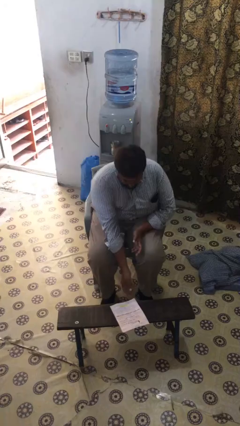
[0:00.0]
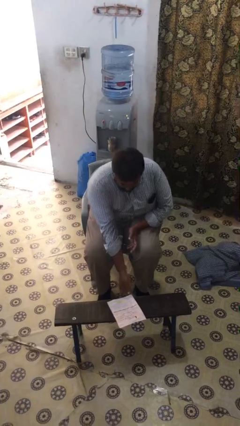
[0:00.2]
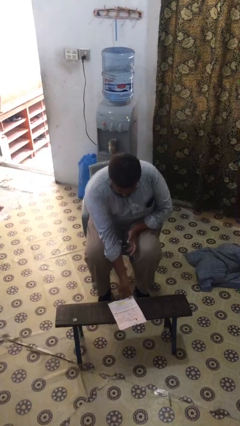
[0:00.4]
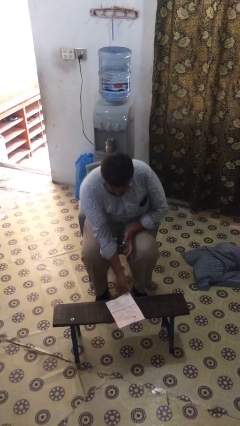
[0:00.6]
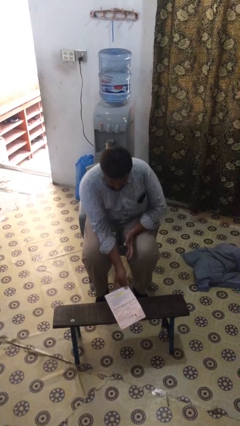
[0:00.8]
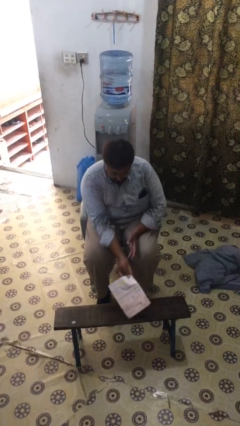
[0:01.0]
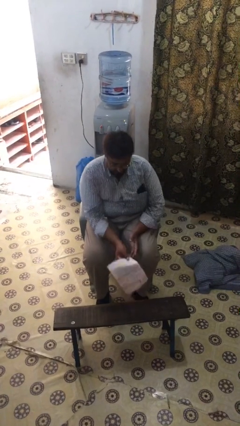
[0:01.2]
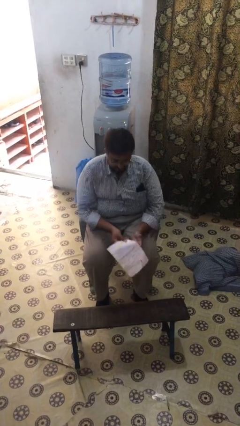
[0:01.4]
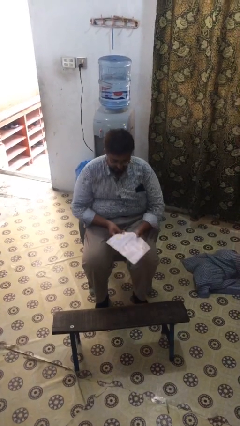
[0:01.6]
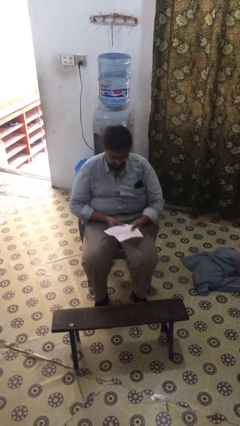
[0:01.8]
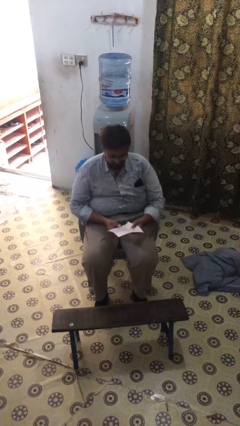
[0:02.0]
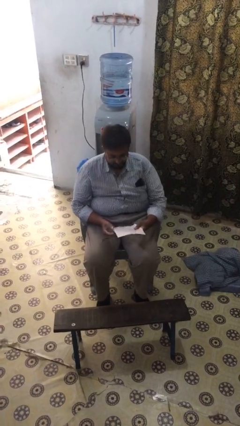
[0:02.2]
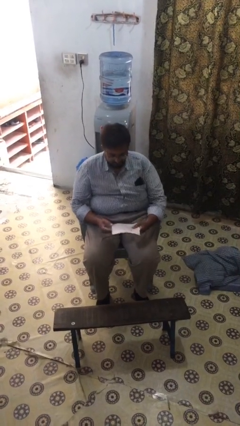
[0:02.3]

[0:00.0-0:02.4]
person picks up object from table

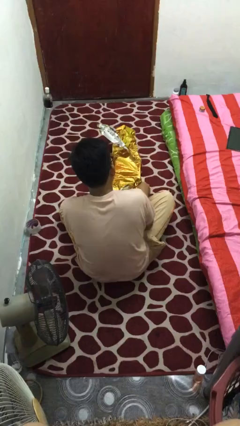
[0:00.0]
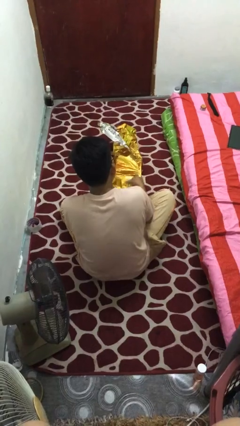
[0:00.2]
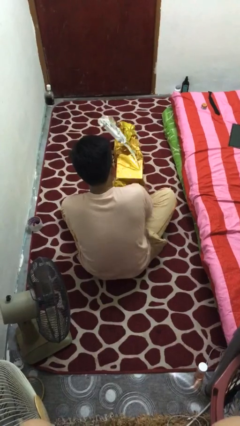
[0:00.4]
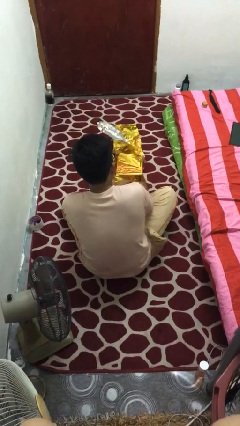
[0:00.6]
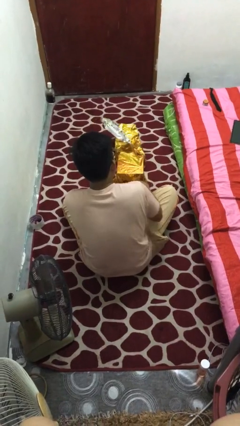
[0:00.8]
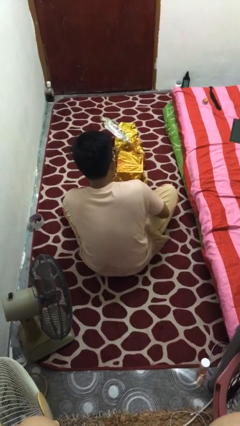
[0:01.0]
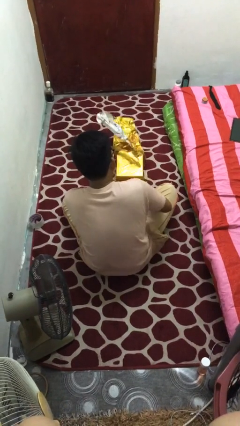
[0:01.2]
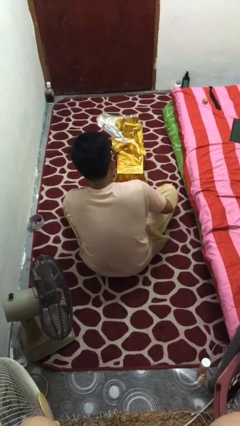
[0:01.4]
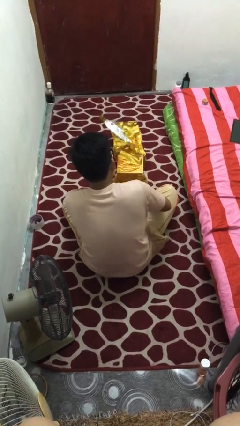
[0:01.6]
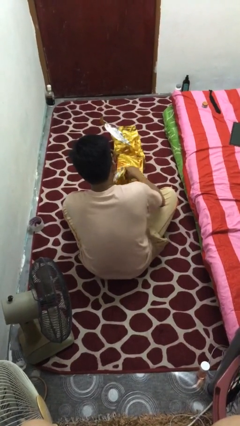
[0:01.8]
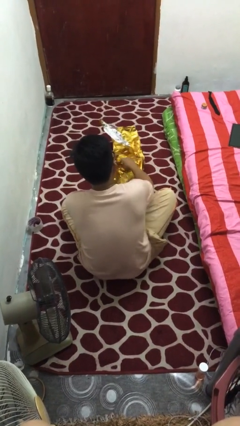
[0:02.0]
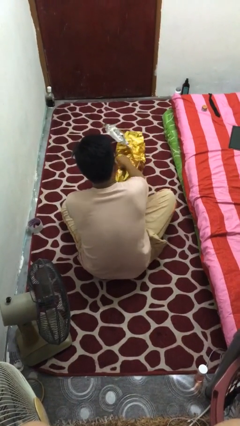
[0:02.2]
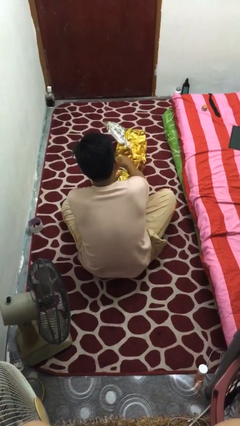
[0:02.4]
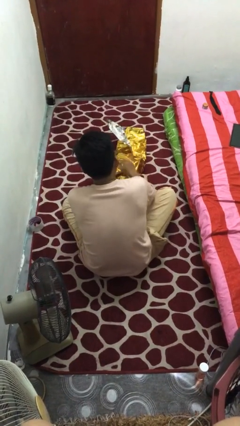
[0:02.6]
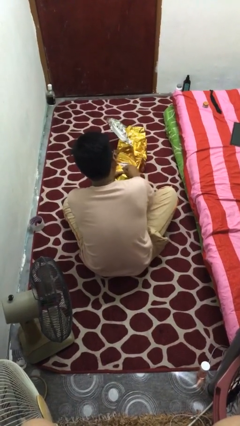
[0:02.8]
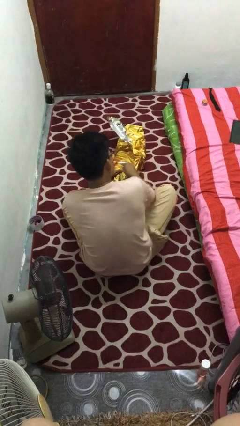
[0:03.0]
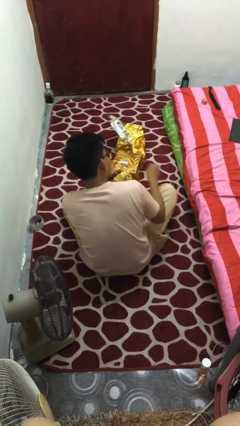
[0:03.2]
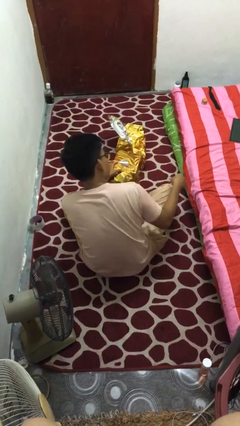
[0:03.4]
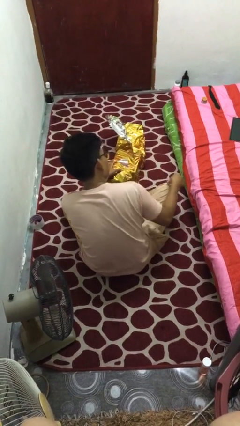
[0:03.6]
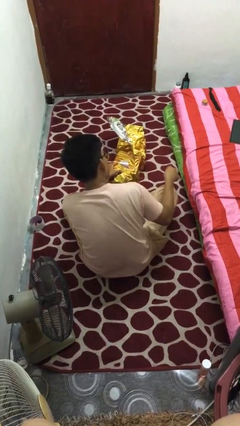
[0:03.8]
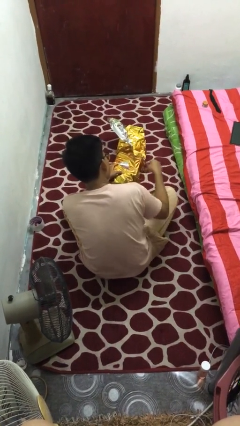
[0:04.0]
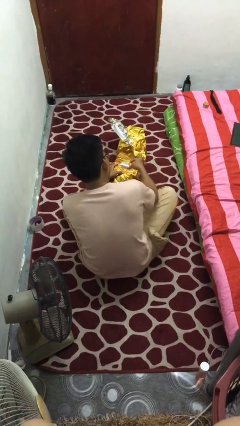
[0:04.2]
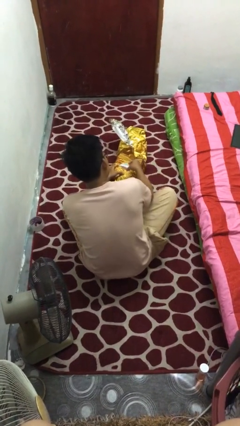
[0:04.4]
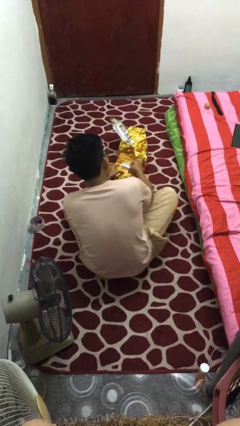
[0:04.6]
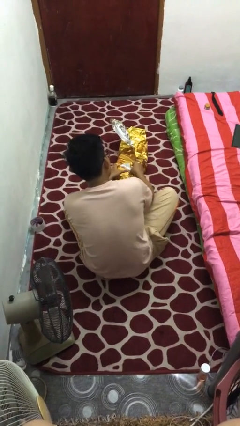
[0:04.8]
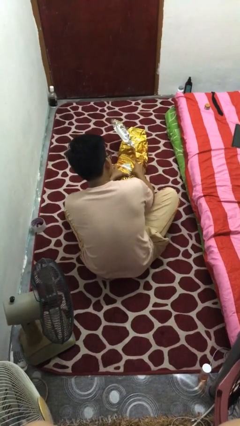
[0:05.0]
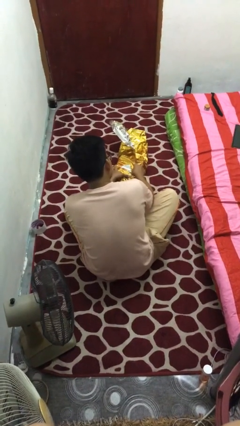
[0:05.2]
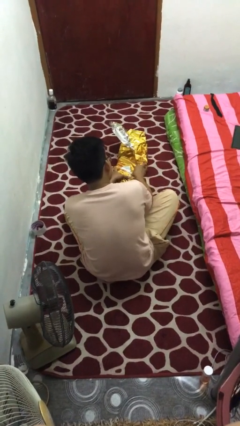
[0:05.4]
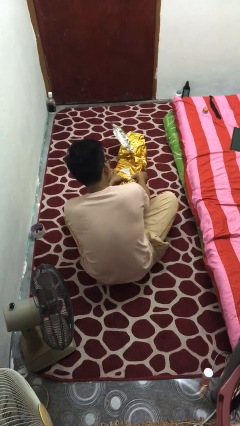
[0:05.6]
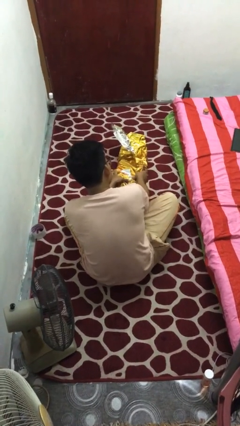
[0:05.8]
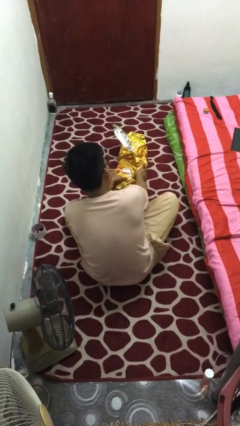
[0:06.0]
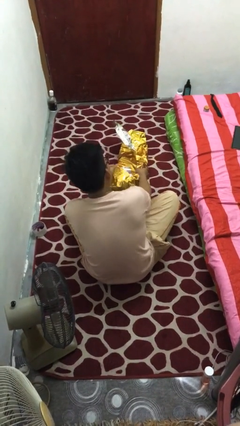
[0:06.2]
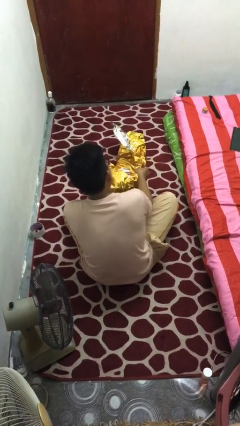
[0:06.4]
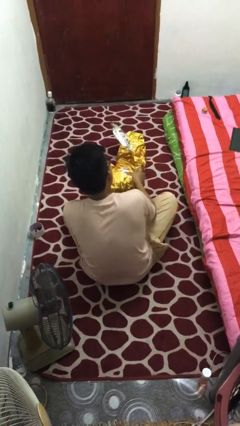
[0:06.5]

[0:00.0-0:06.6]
person wraps box

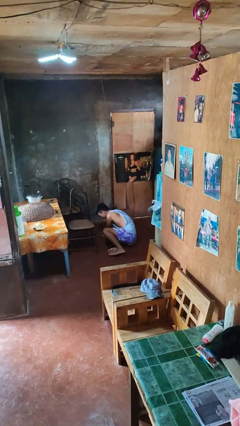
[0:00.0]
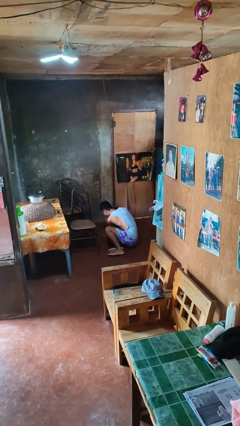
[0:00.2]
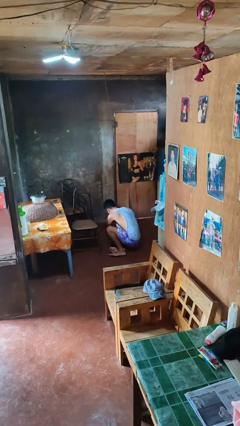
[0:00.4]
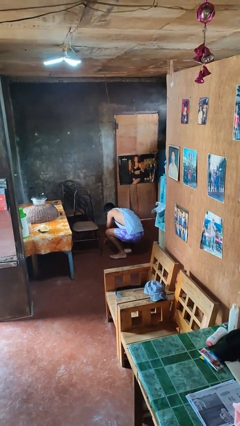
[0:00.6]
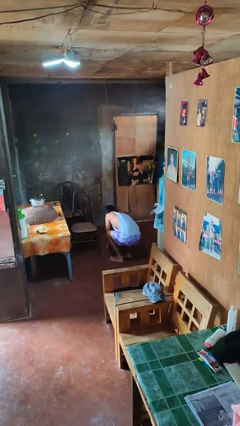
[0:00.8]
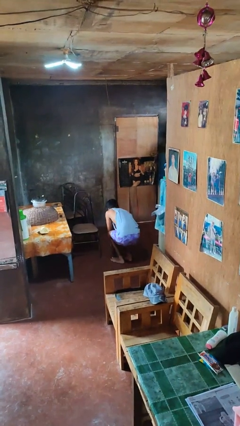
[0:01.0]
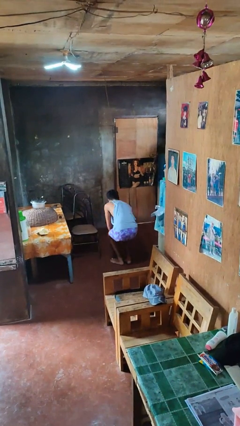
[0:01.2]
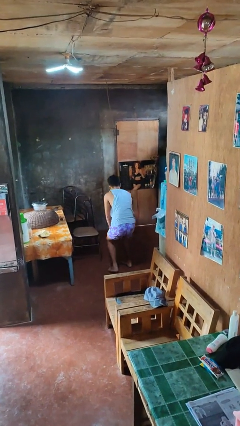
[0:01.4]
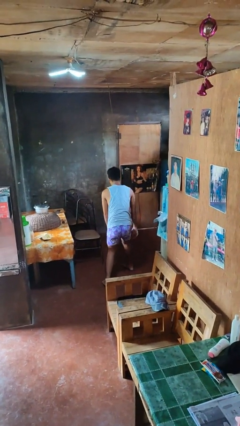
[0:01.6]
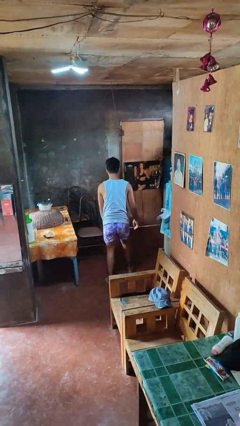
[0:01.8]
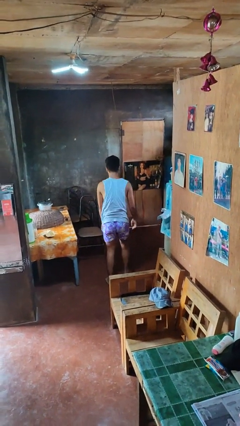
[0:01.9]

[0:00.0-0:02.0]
person stands up from floor

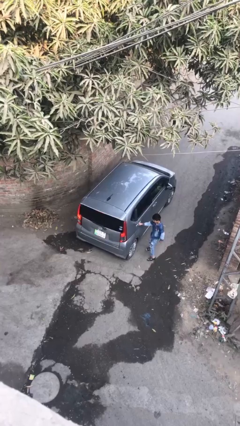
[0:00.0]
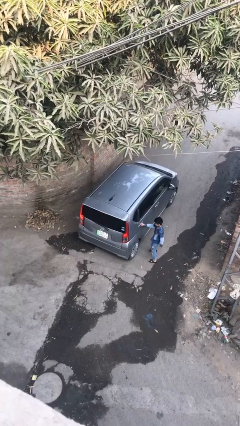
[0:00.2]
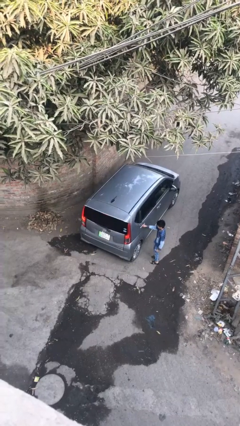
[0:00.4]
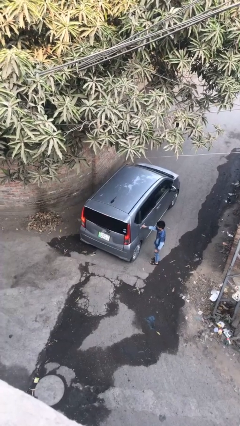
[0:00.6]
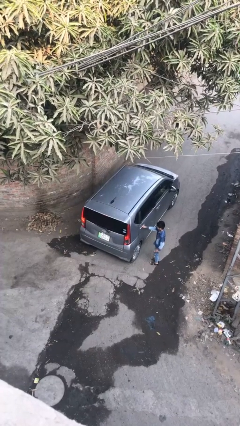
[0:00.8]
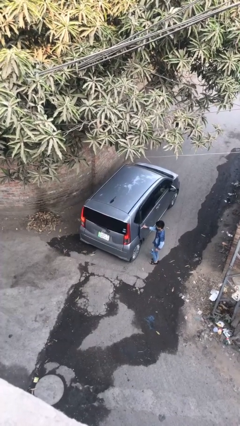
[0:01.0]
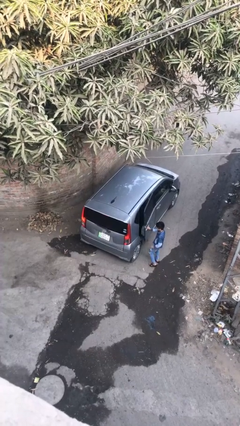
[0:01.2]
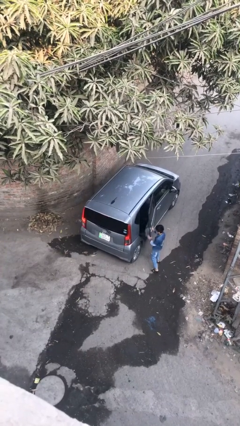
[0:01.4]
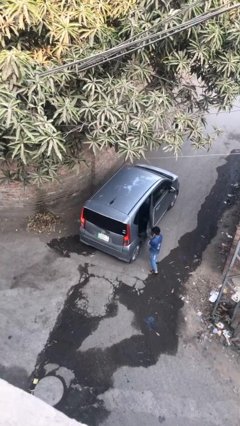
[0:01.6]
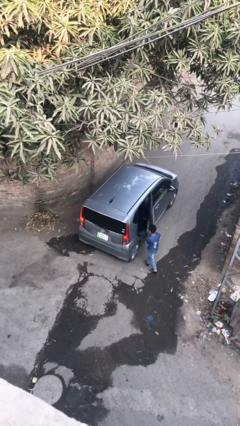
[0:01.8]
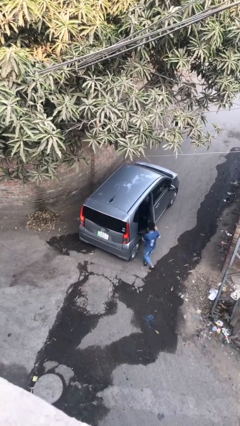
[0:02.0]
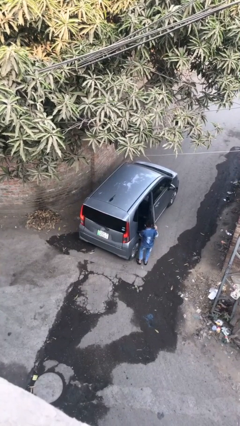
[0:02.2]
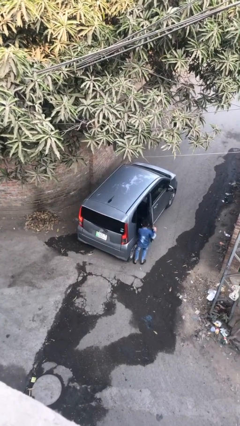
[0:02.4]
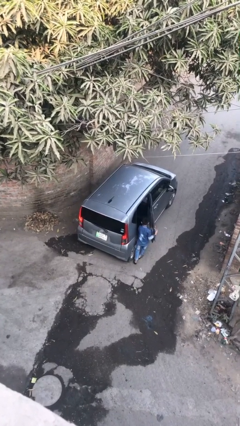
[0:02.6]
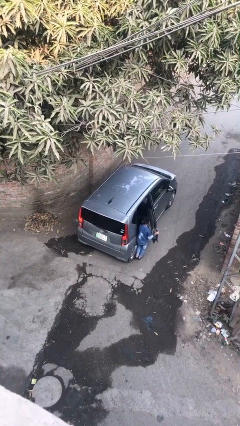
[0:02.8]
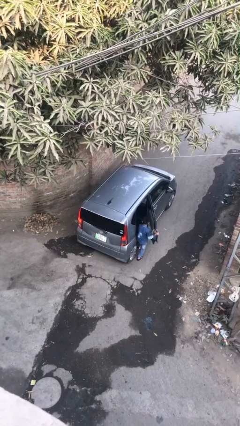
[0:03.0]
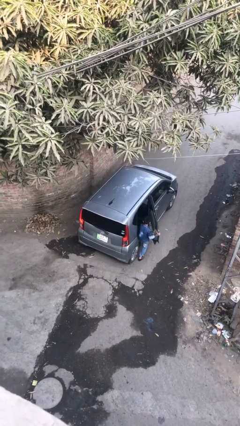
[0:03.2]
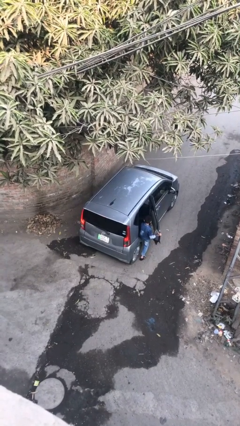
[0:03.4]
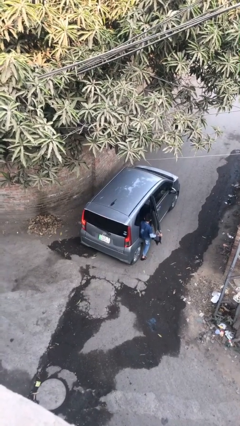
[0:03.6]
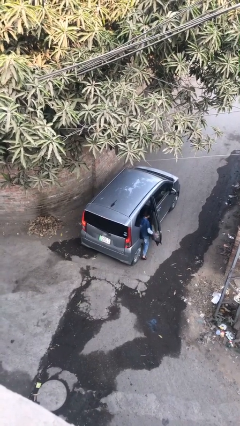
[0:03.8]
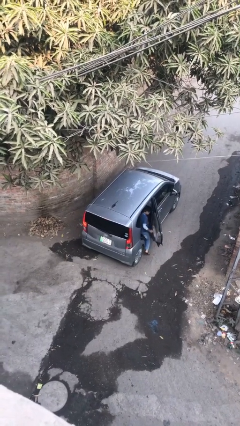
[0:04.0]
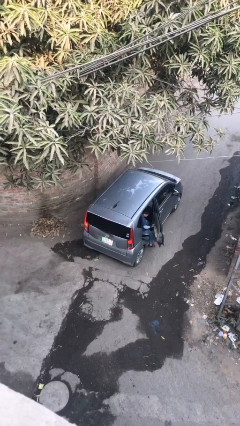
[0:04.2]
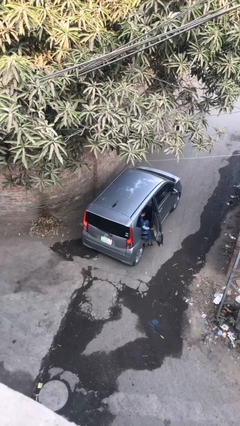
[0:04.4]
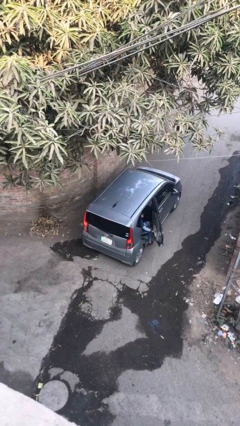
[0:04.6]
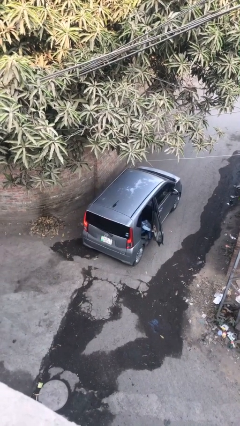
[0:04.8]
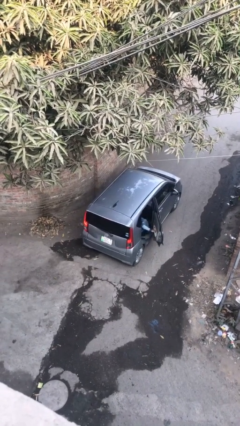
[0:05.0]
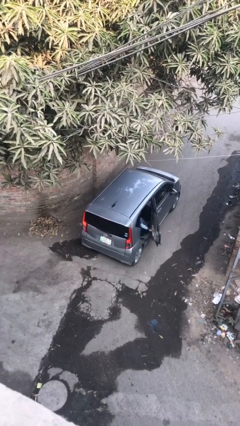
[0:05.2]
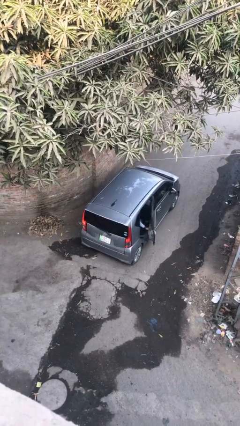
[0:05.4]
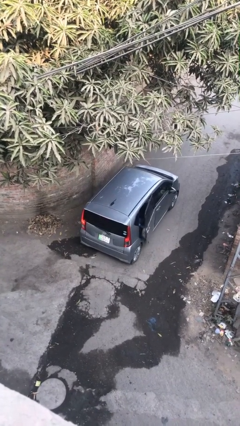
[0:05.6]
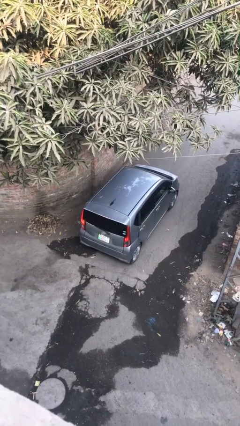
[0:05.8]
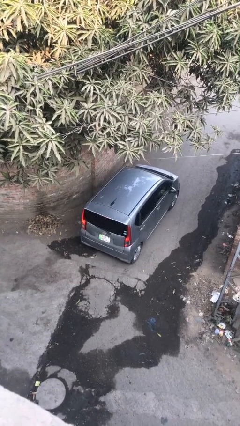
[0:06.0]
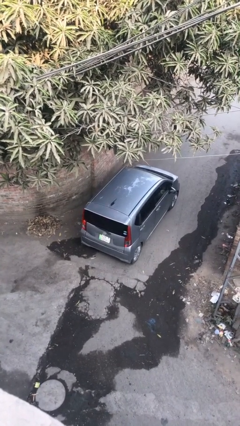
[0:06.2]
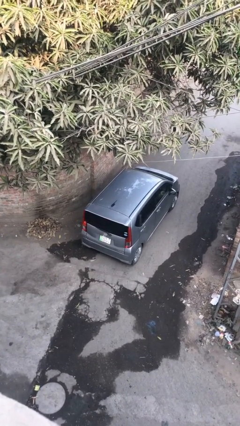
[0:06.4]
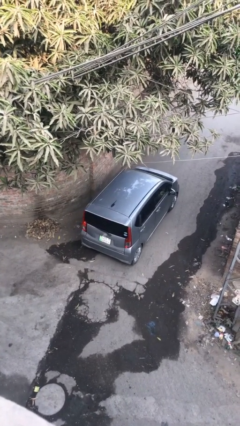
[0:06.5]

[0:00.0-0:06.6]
car picks up person

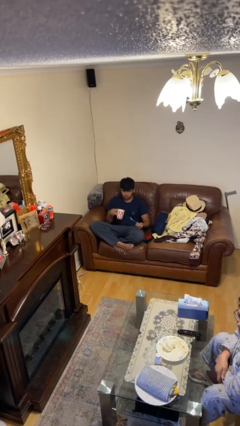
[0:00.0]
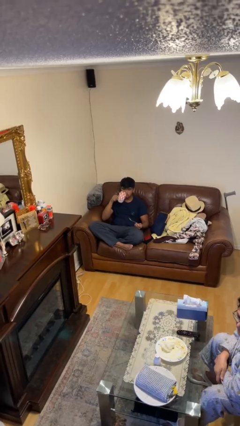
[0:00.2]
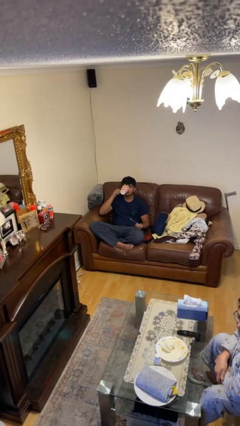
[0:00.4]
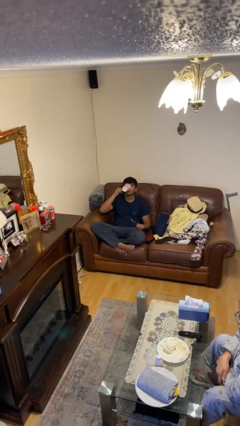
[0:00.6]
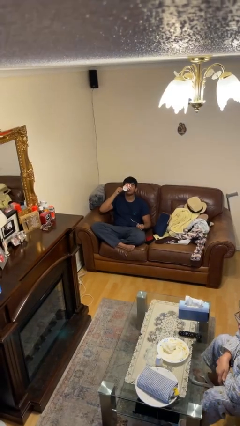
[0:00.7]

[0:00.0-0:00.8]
person drinks from mug
